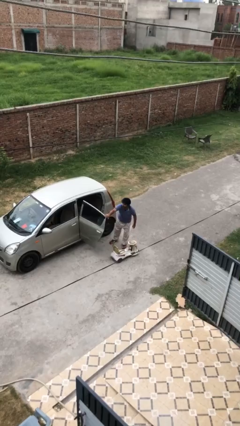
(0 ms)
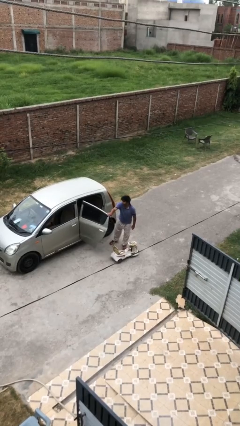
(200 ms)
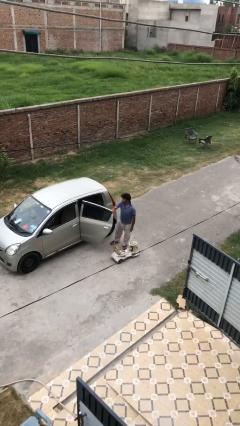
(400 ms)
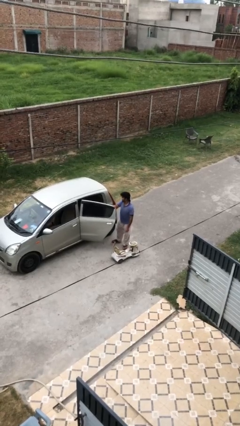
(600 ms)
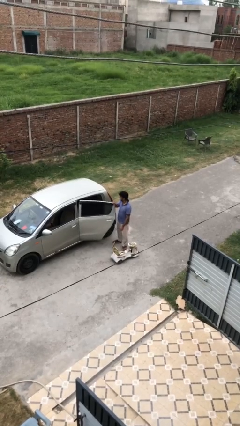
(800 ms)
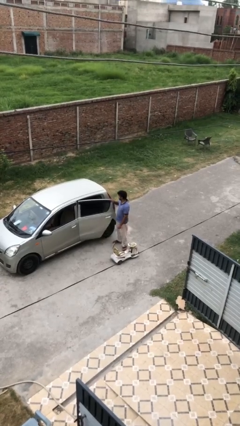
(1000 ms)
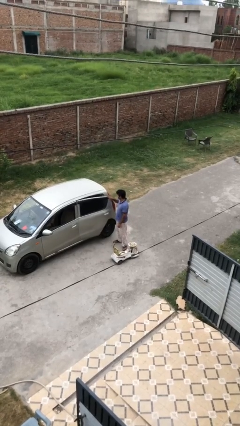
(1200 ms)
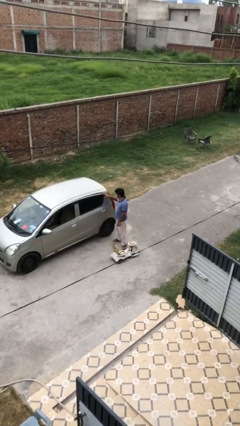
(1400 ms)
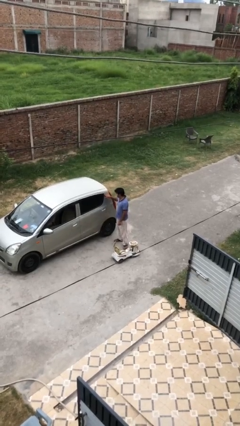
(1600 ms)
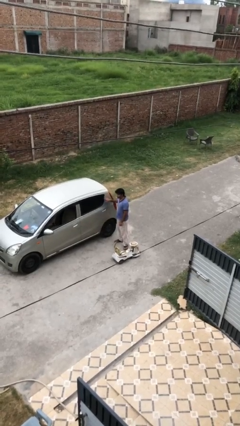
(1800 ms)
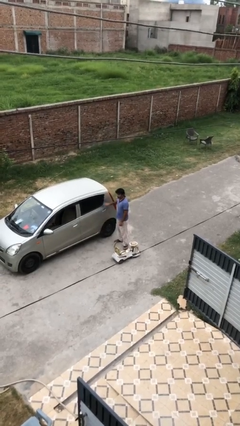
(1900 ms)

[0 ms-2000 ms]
person closes car door

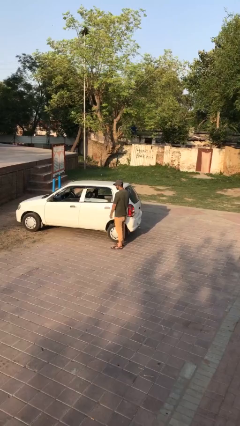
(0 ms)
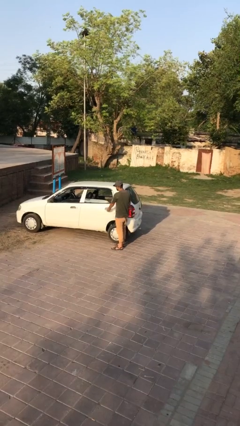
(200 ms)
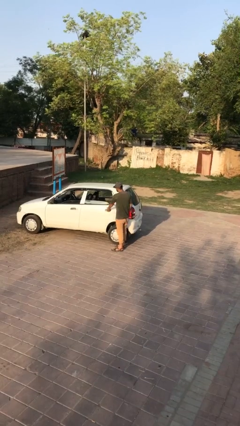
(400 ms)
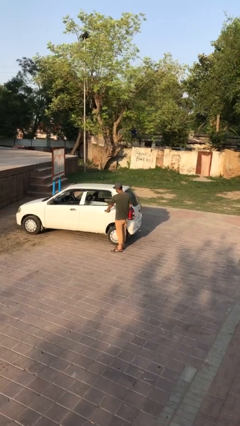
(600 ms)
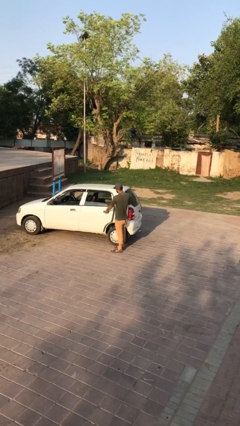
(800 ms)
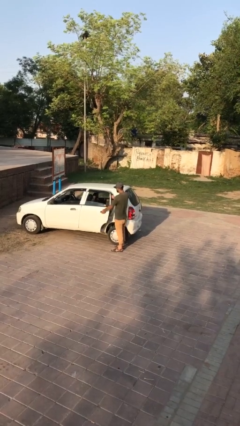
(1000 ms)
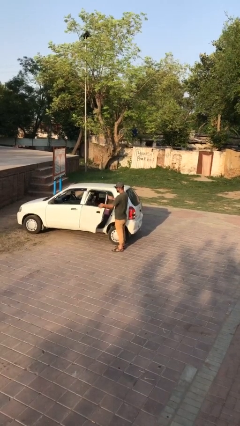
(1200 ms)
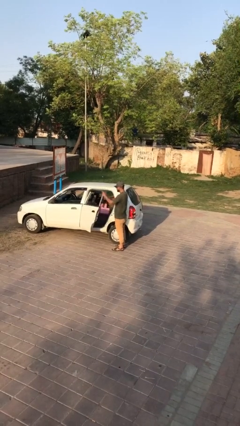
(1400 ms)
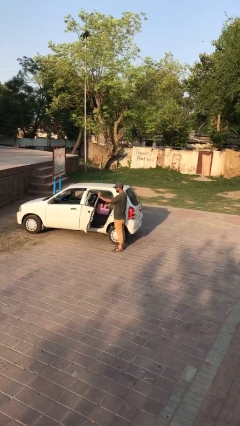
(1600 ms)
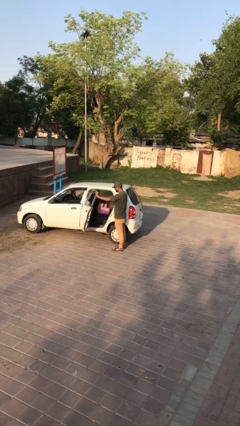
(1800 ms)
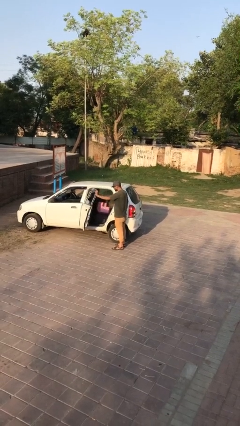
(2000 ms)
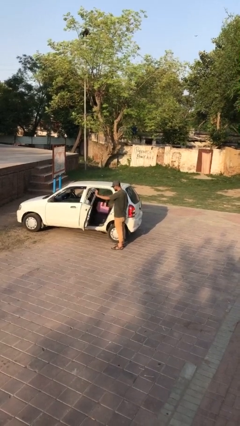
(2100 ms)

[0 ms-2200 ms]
person opens car door

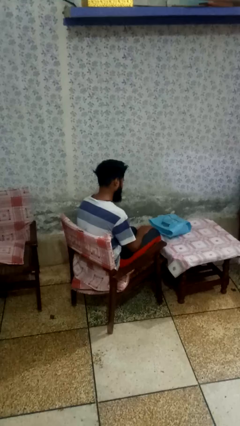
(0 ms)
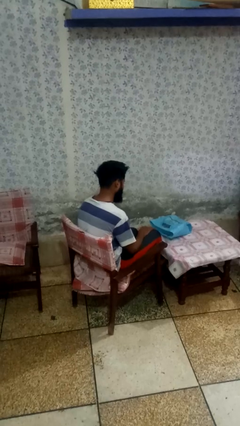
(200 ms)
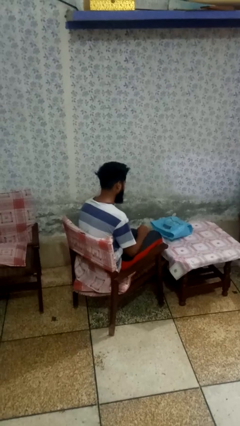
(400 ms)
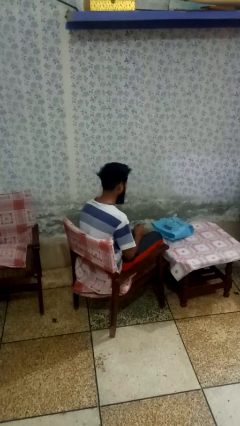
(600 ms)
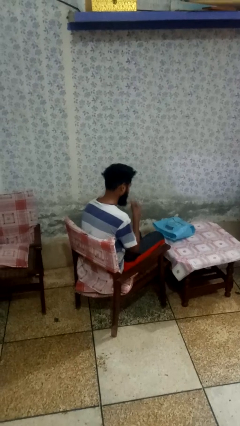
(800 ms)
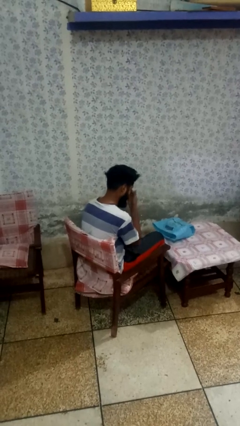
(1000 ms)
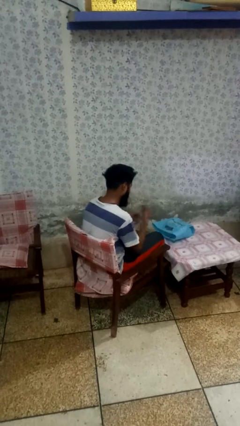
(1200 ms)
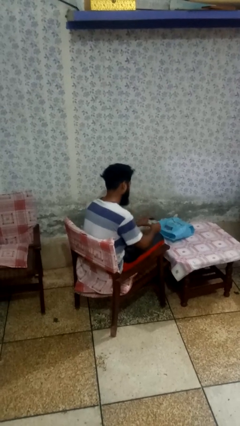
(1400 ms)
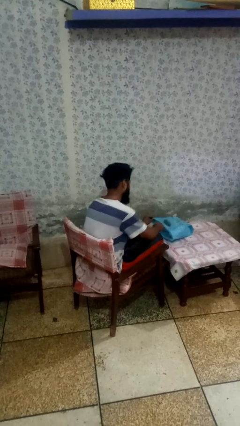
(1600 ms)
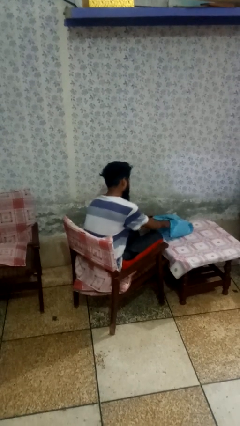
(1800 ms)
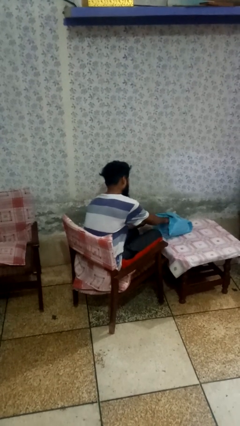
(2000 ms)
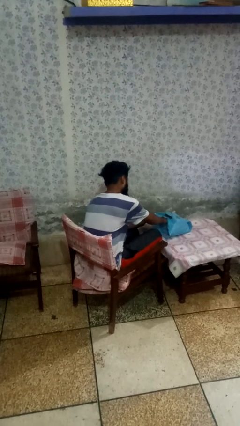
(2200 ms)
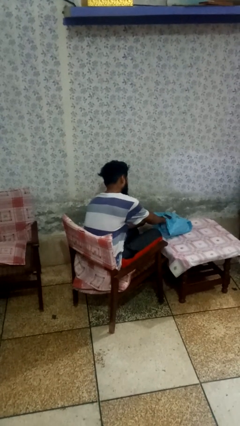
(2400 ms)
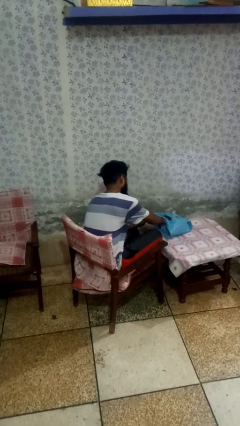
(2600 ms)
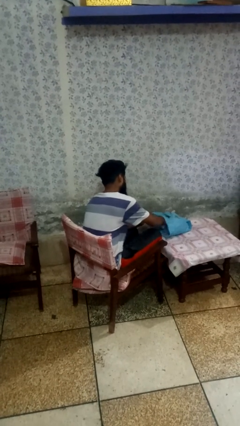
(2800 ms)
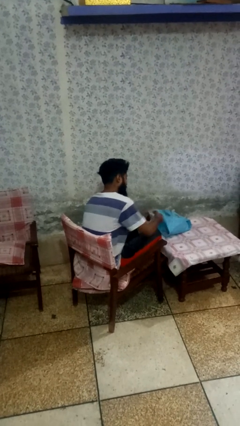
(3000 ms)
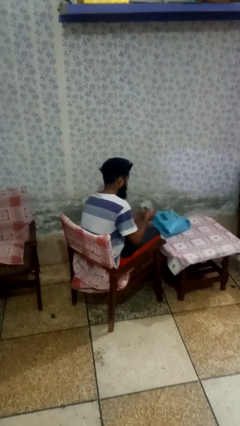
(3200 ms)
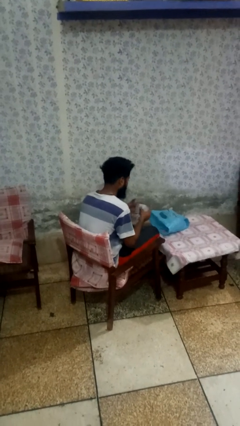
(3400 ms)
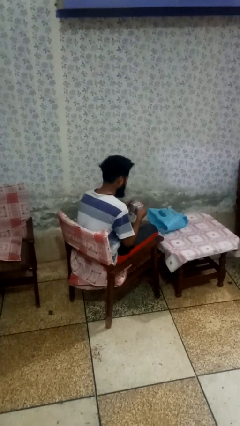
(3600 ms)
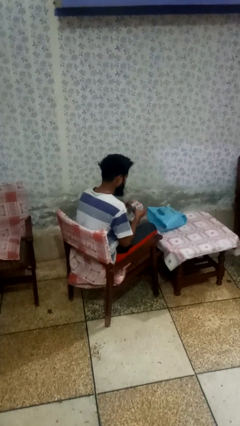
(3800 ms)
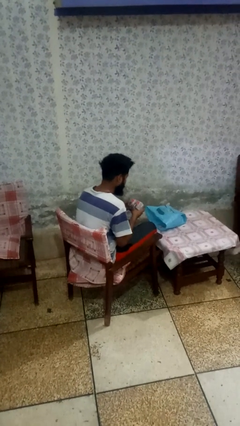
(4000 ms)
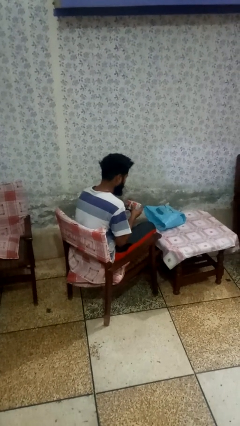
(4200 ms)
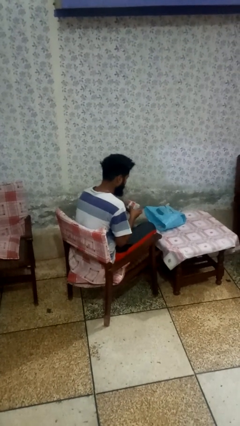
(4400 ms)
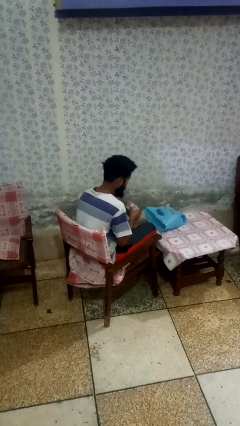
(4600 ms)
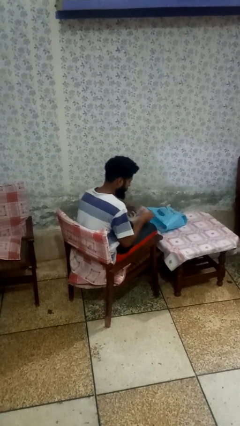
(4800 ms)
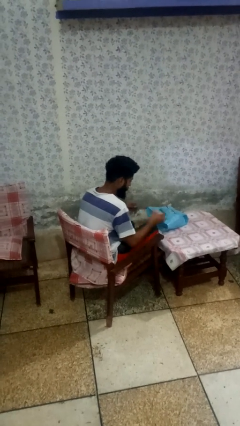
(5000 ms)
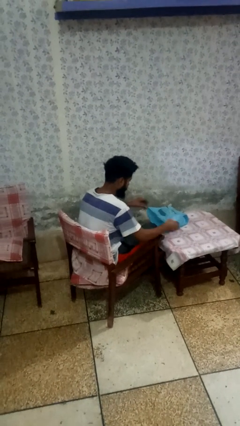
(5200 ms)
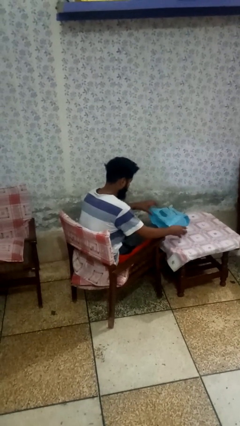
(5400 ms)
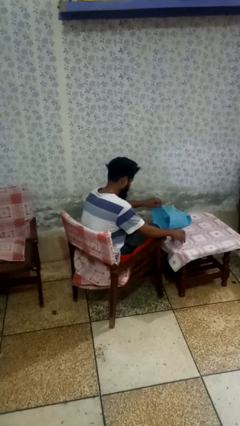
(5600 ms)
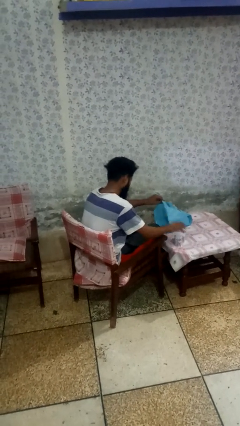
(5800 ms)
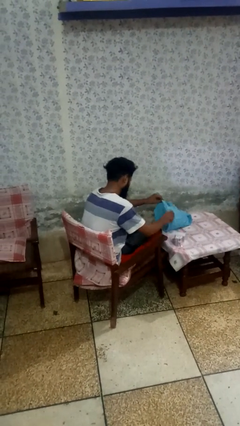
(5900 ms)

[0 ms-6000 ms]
person takes object from bag

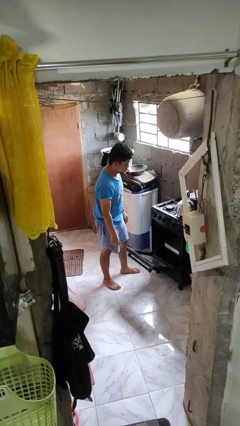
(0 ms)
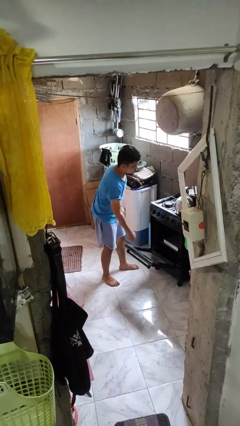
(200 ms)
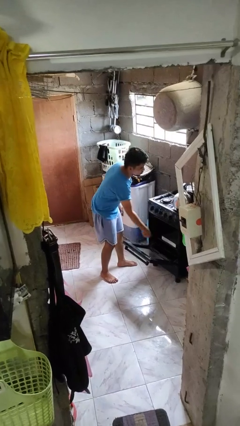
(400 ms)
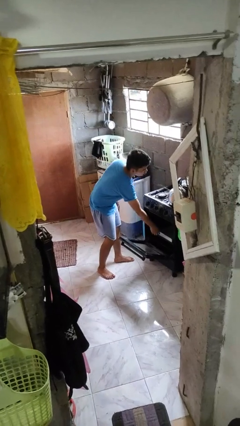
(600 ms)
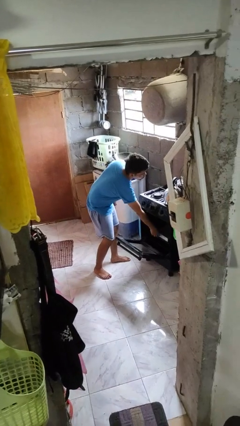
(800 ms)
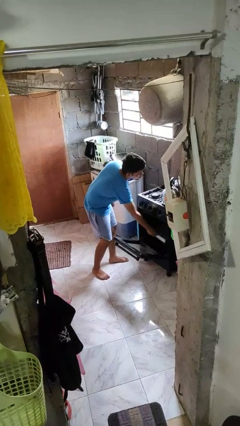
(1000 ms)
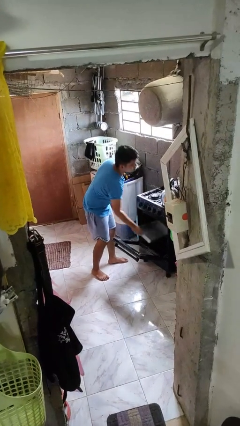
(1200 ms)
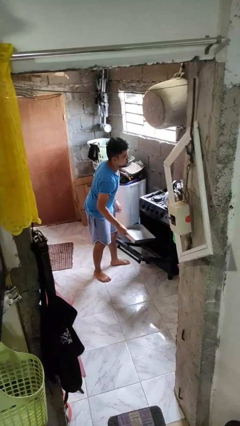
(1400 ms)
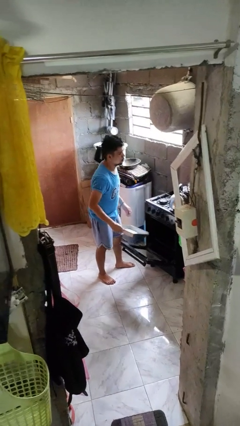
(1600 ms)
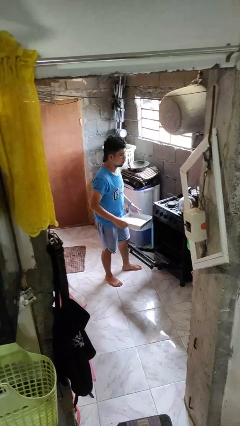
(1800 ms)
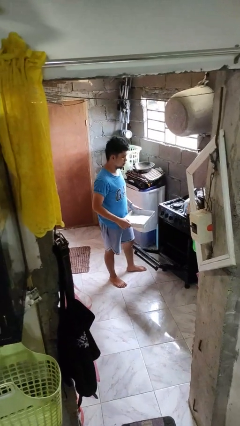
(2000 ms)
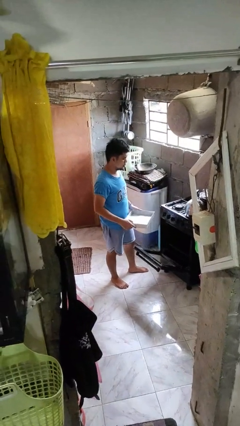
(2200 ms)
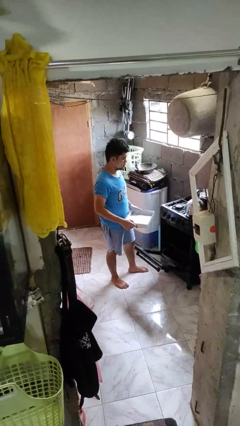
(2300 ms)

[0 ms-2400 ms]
person takes object from oven

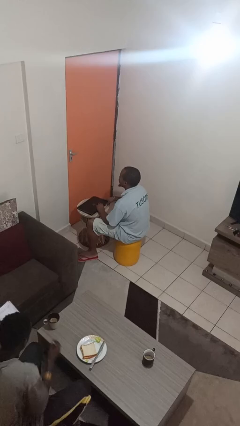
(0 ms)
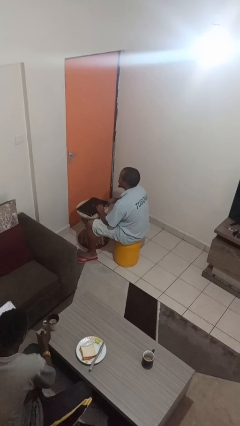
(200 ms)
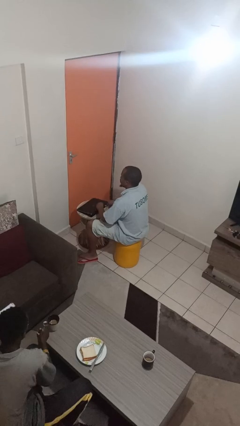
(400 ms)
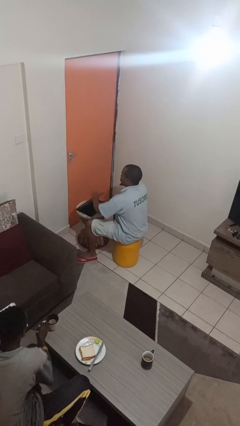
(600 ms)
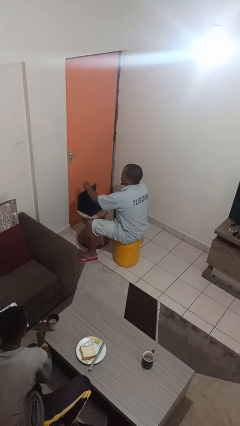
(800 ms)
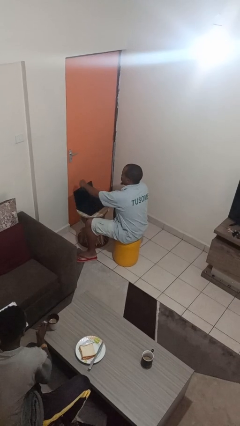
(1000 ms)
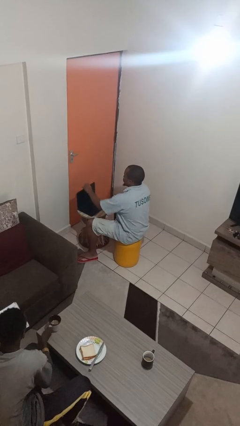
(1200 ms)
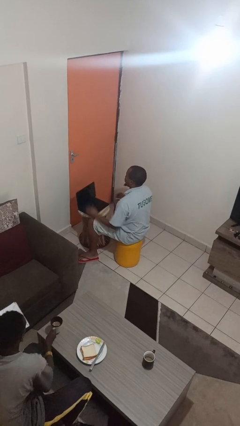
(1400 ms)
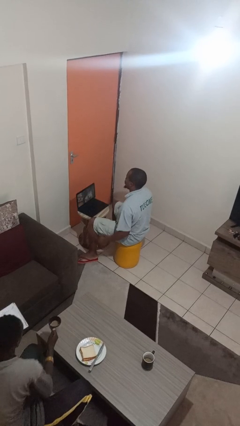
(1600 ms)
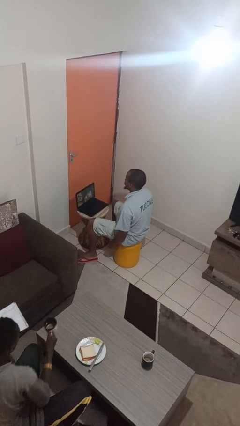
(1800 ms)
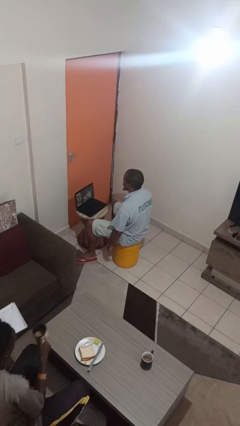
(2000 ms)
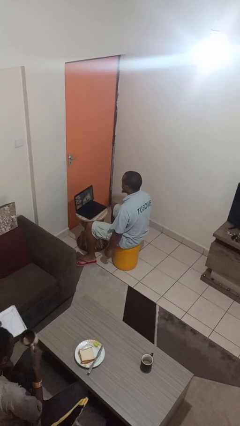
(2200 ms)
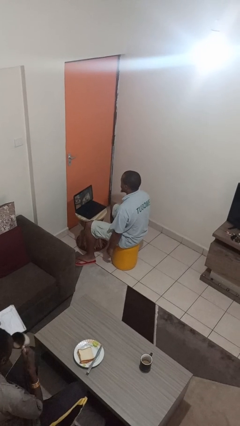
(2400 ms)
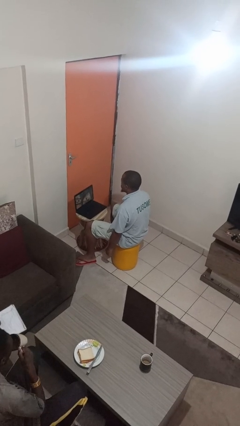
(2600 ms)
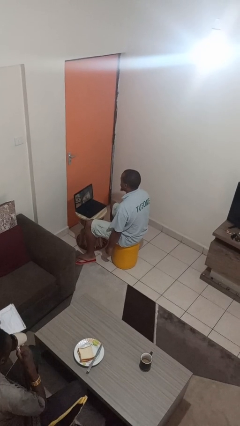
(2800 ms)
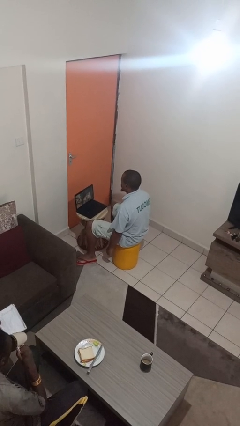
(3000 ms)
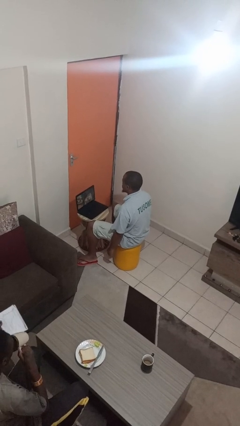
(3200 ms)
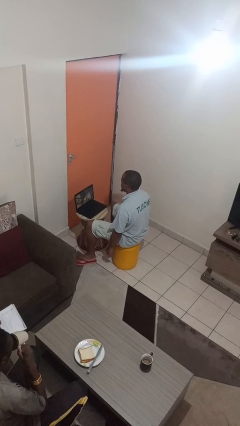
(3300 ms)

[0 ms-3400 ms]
person opens laptop

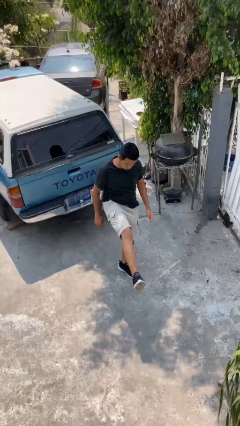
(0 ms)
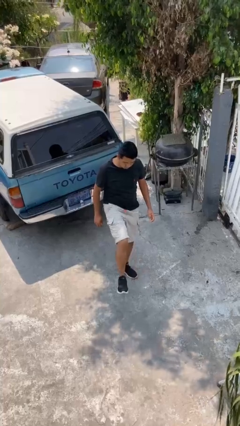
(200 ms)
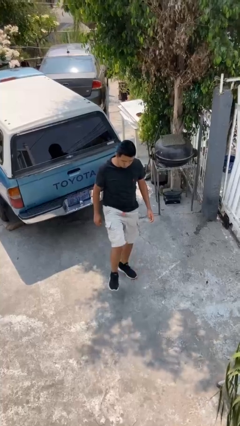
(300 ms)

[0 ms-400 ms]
person karate kicks

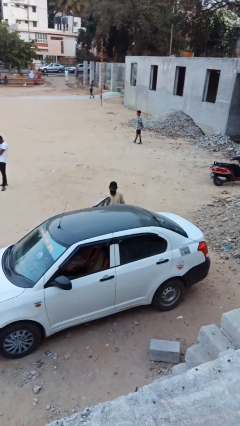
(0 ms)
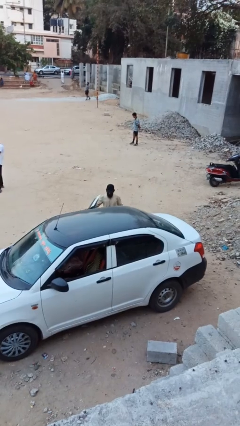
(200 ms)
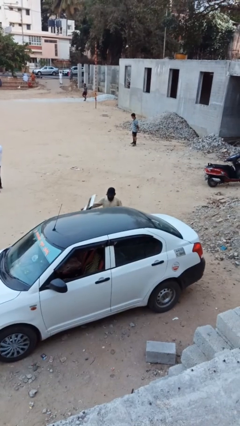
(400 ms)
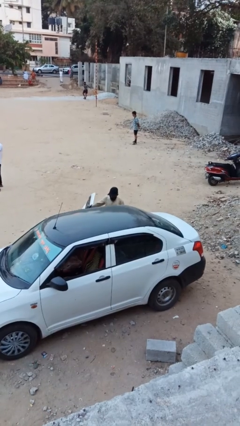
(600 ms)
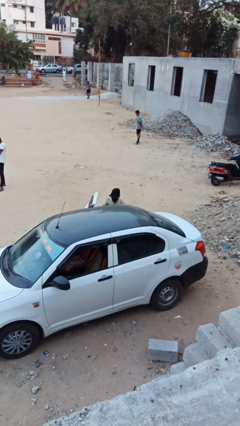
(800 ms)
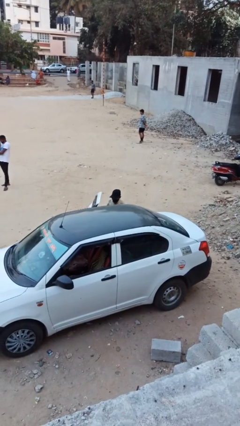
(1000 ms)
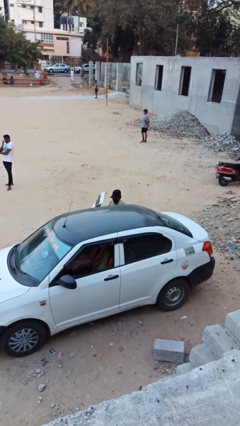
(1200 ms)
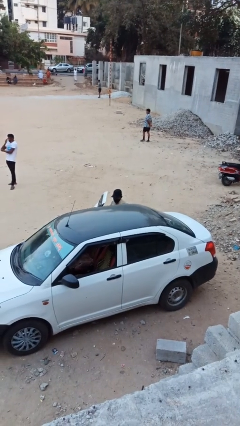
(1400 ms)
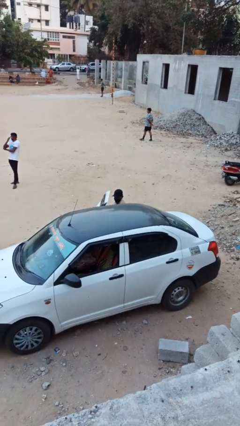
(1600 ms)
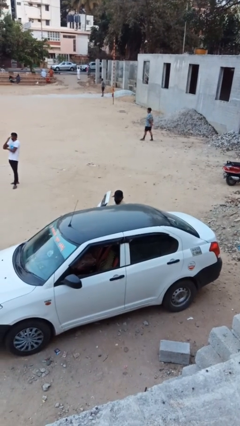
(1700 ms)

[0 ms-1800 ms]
person enters car
